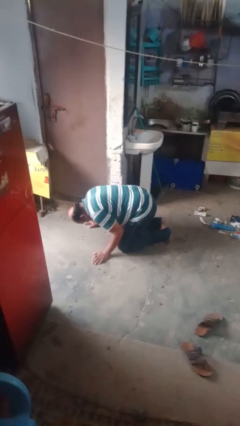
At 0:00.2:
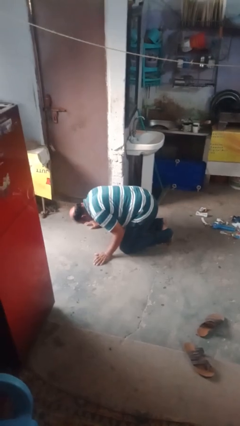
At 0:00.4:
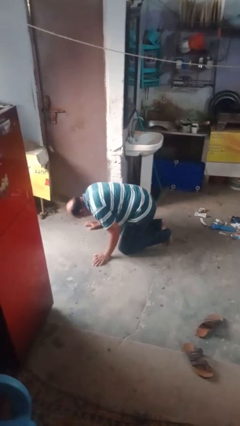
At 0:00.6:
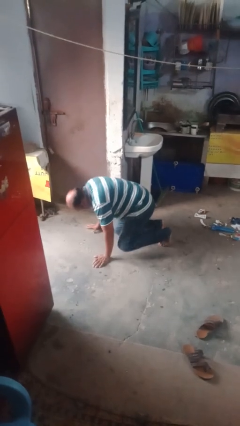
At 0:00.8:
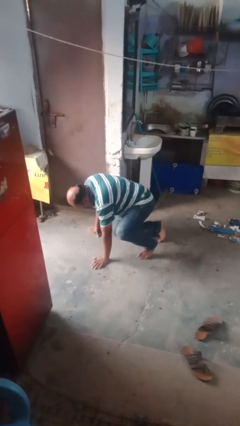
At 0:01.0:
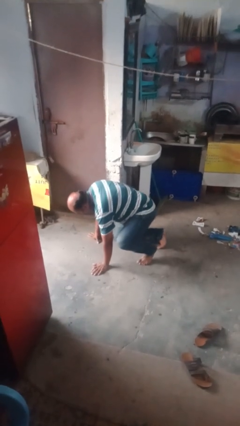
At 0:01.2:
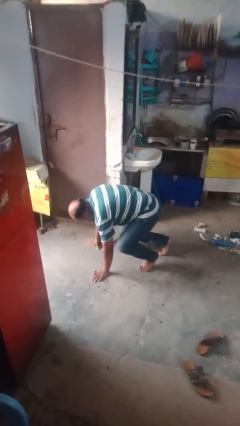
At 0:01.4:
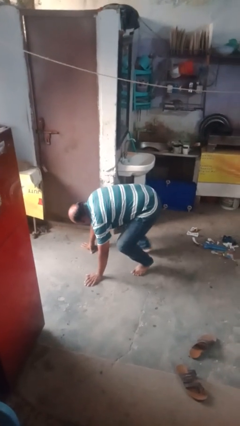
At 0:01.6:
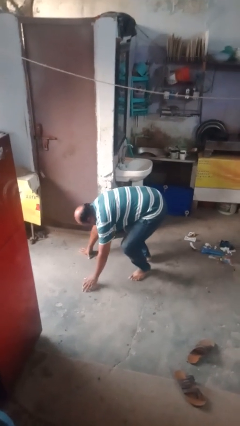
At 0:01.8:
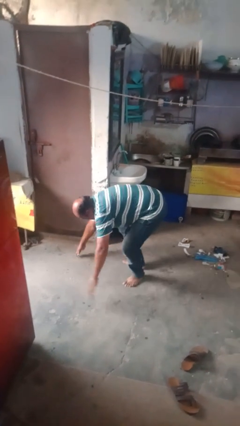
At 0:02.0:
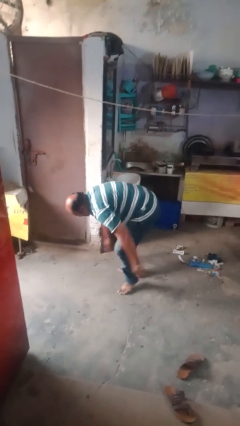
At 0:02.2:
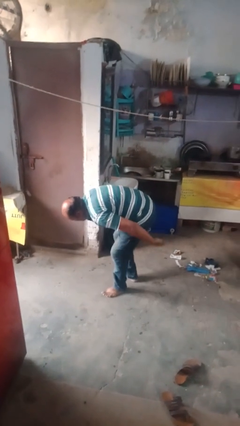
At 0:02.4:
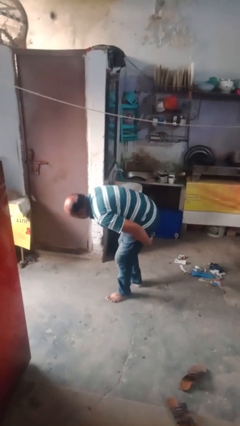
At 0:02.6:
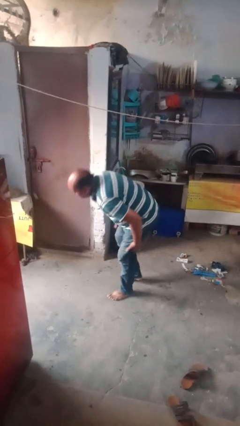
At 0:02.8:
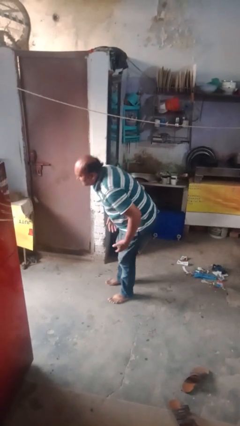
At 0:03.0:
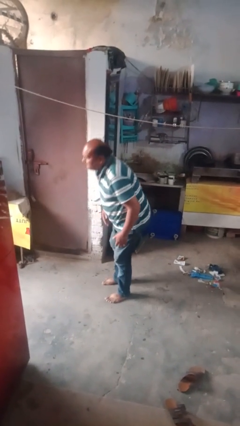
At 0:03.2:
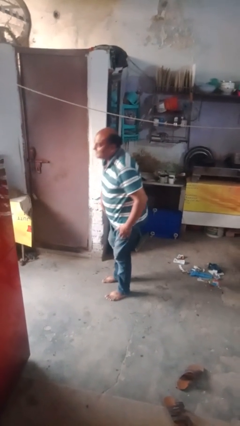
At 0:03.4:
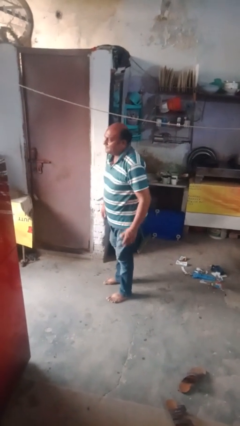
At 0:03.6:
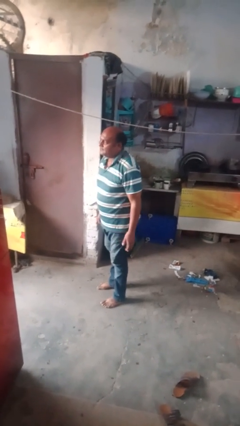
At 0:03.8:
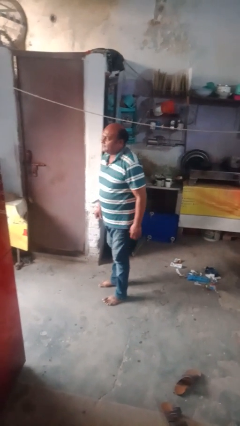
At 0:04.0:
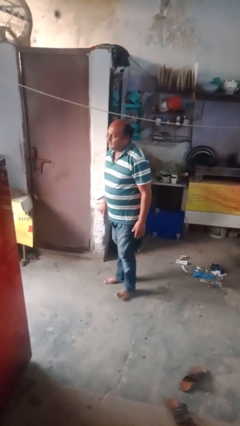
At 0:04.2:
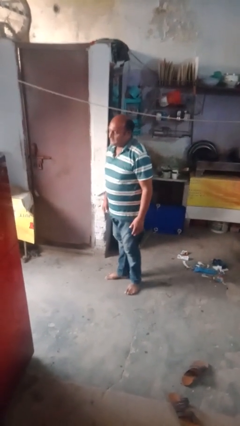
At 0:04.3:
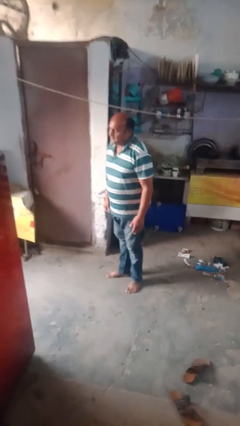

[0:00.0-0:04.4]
person stands up from floor

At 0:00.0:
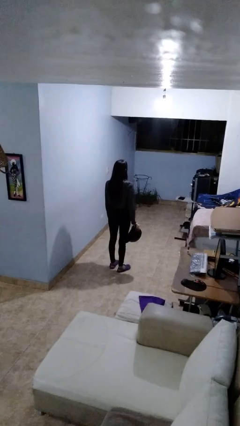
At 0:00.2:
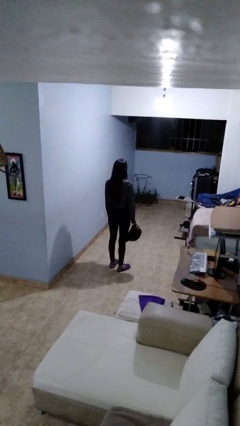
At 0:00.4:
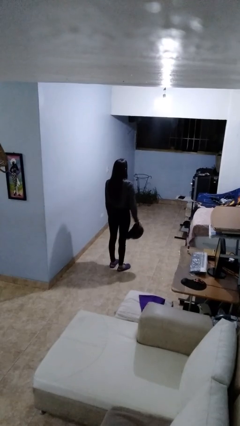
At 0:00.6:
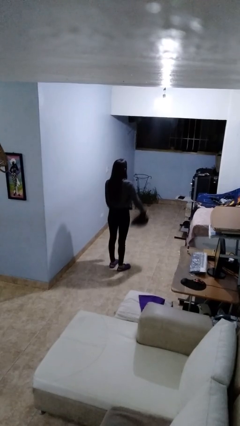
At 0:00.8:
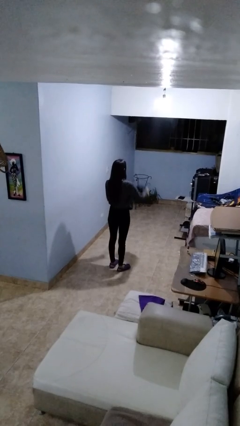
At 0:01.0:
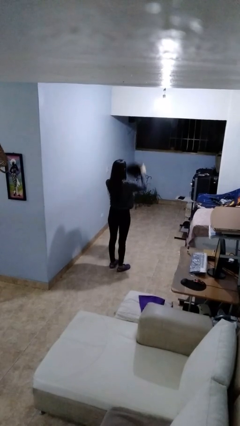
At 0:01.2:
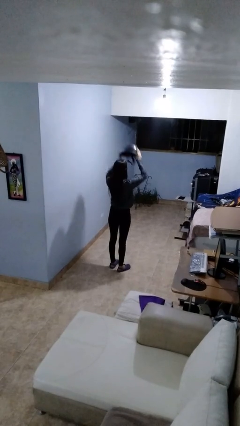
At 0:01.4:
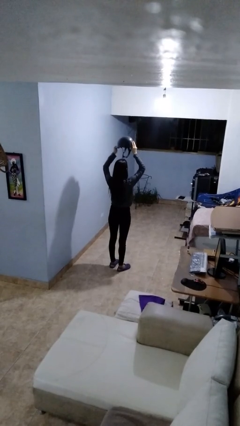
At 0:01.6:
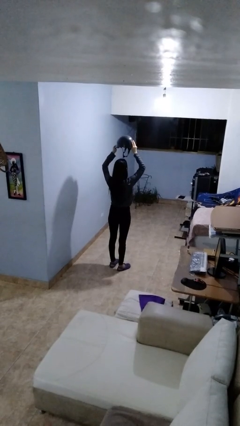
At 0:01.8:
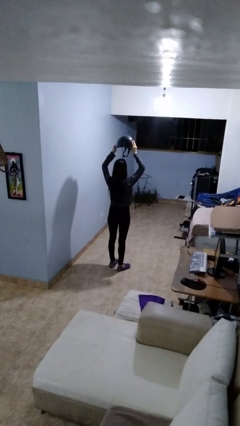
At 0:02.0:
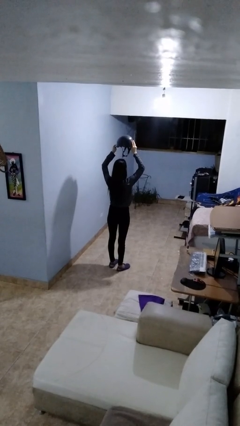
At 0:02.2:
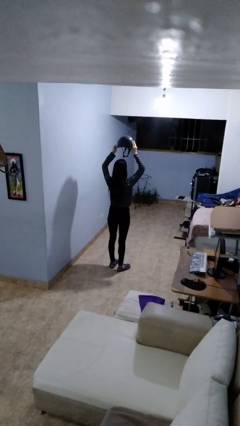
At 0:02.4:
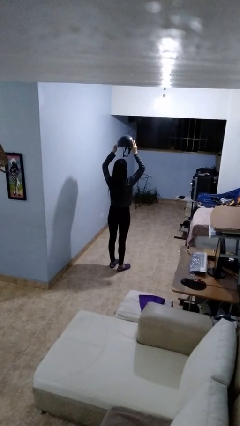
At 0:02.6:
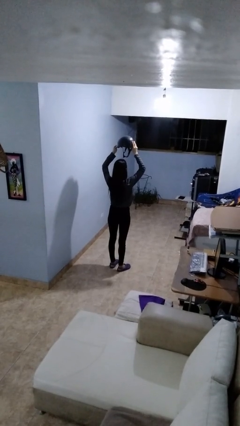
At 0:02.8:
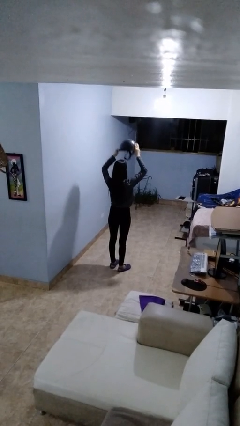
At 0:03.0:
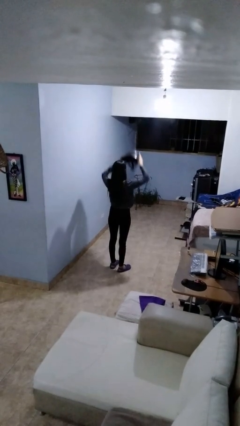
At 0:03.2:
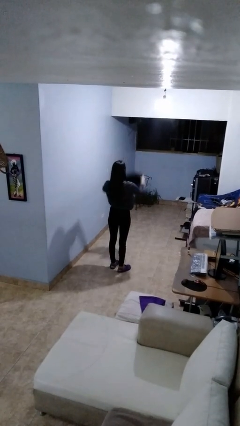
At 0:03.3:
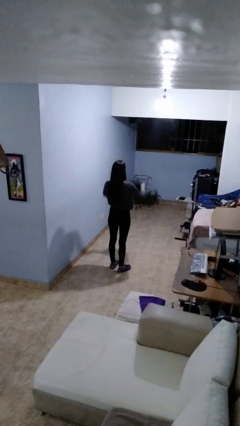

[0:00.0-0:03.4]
person holds object above head

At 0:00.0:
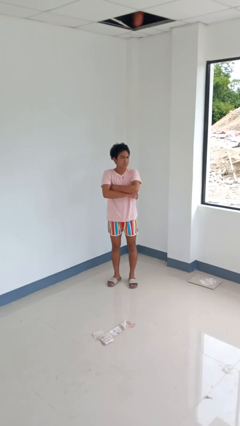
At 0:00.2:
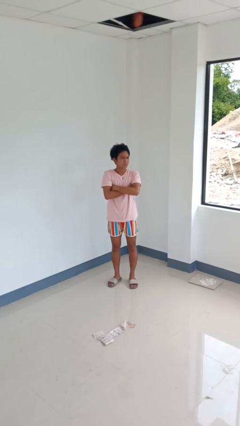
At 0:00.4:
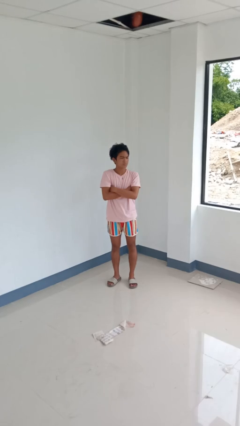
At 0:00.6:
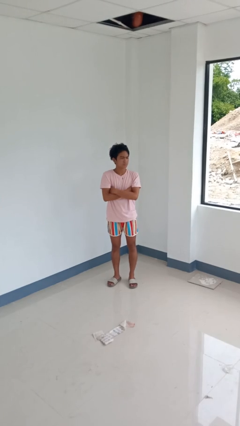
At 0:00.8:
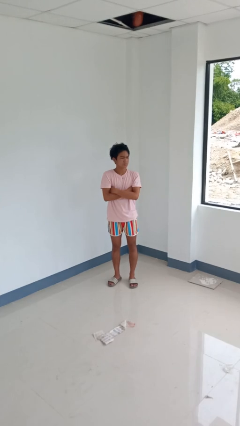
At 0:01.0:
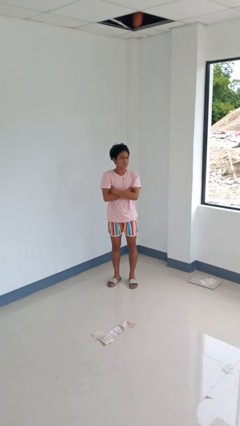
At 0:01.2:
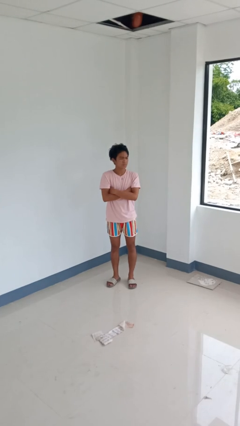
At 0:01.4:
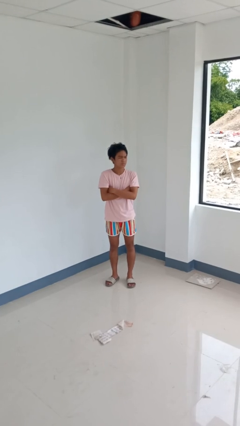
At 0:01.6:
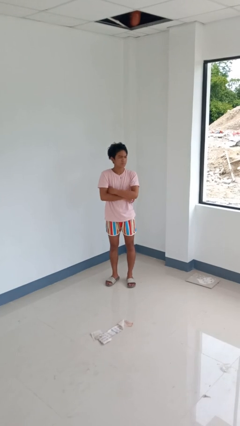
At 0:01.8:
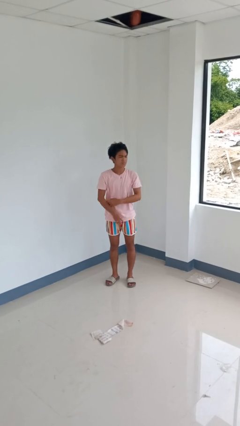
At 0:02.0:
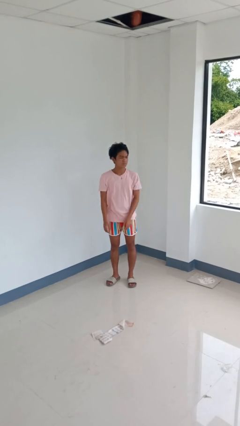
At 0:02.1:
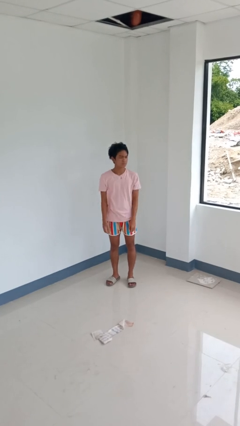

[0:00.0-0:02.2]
person crosses arms

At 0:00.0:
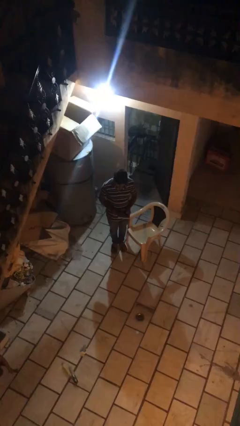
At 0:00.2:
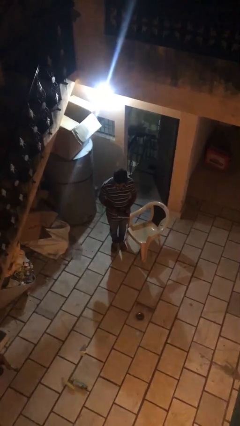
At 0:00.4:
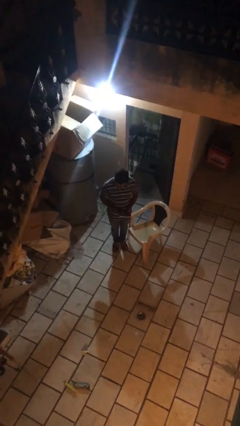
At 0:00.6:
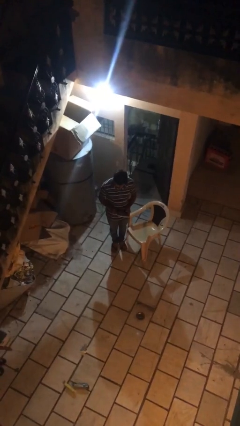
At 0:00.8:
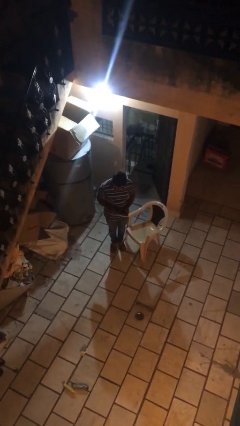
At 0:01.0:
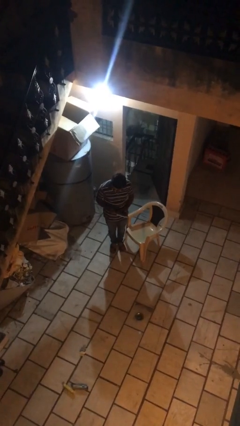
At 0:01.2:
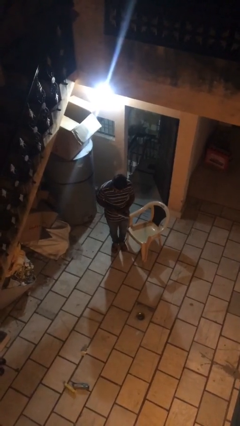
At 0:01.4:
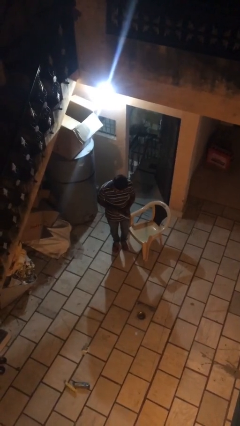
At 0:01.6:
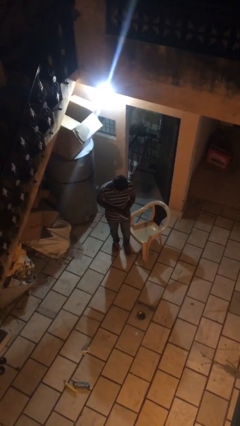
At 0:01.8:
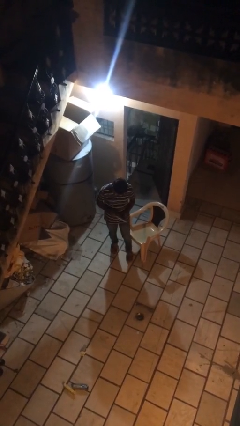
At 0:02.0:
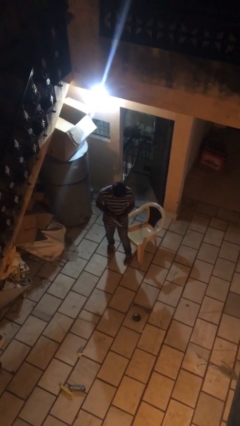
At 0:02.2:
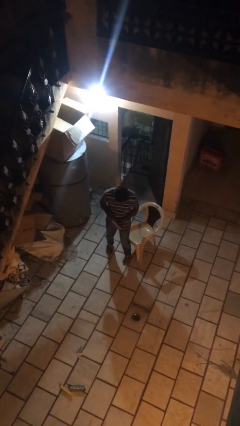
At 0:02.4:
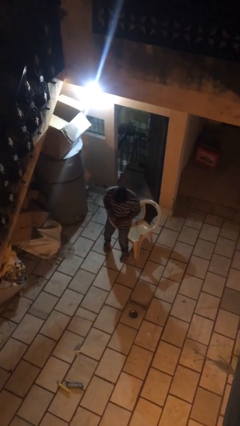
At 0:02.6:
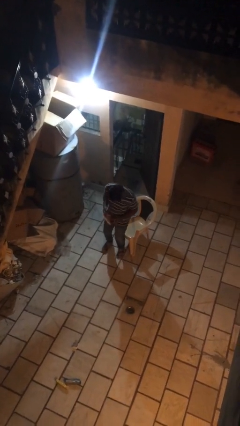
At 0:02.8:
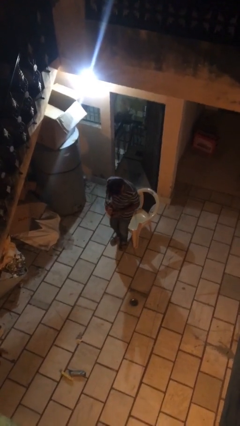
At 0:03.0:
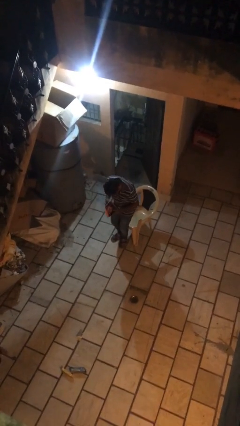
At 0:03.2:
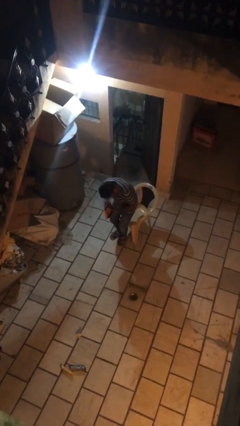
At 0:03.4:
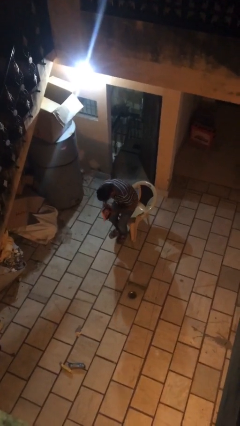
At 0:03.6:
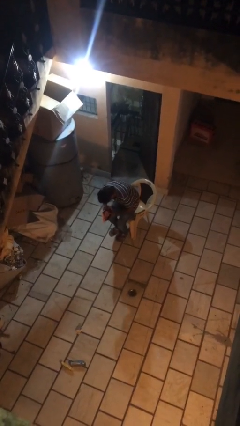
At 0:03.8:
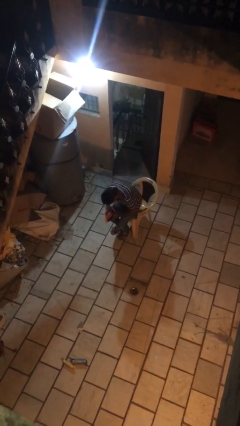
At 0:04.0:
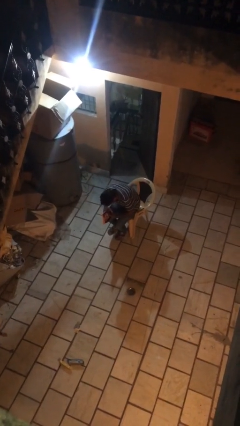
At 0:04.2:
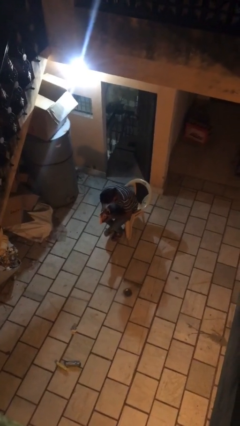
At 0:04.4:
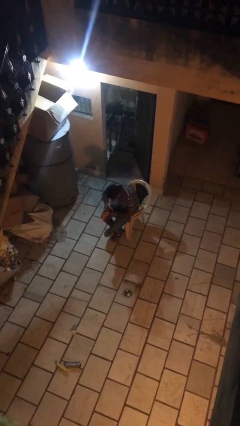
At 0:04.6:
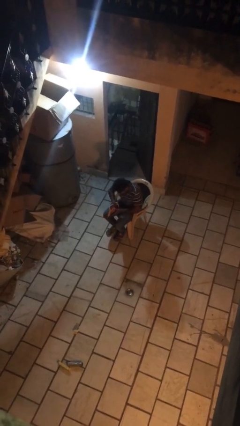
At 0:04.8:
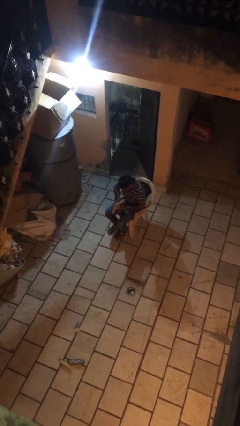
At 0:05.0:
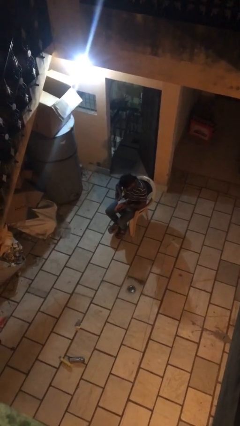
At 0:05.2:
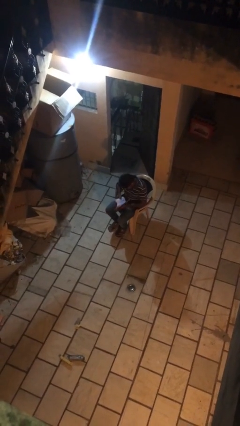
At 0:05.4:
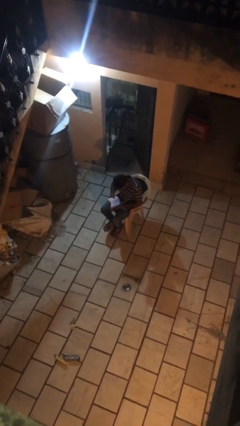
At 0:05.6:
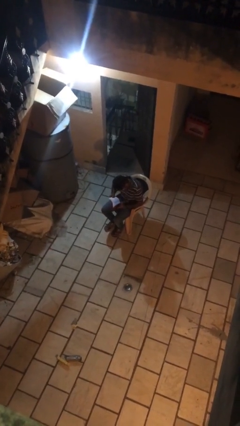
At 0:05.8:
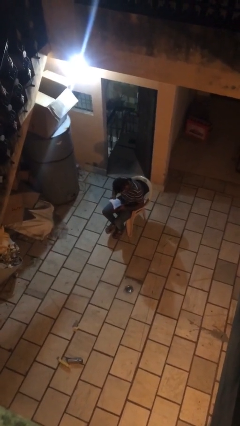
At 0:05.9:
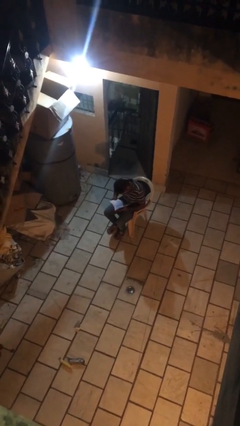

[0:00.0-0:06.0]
person sits down

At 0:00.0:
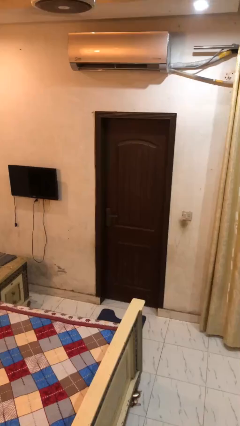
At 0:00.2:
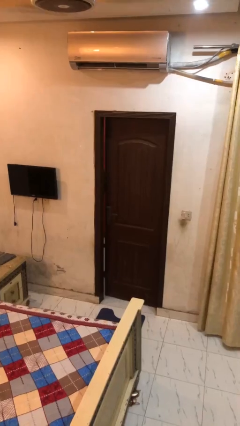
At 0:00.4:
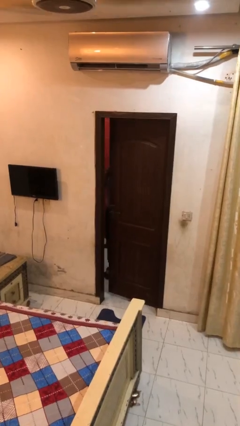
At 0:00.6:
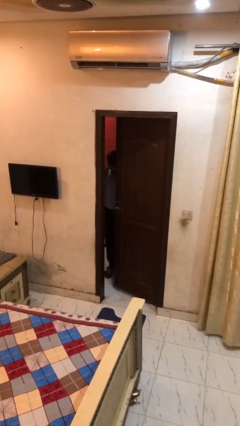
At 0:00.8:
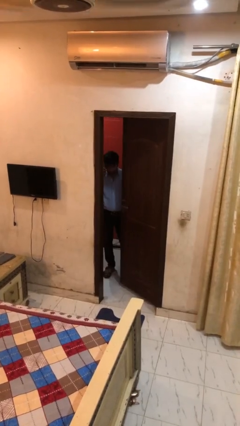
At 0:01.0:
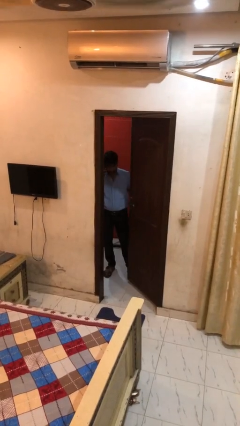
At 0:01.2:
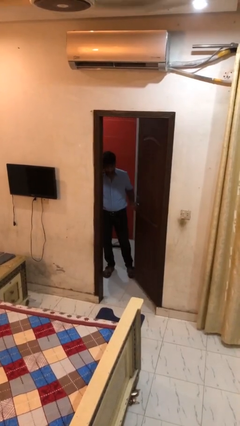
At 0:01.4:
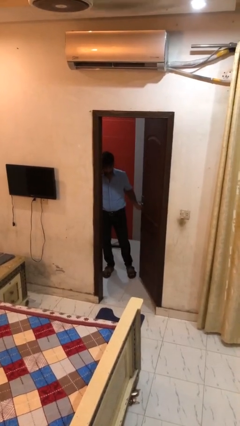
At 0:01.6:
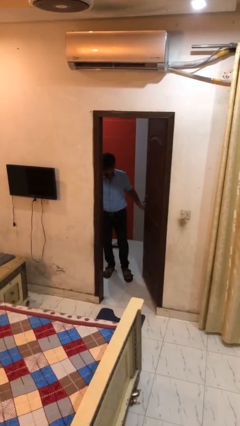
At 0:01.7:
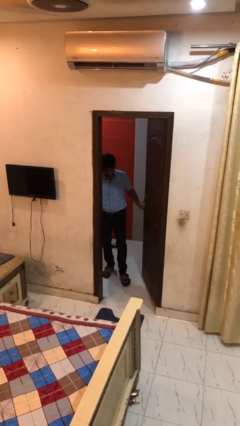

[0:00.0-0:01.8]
person opens facility door
